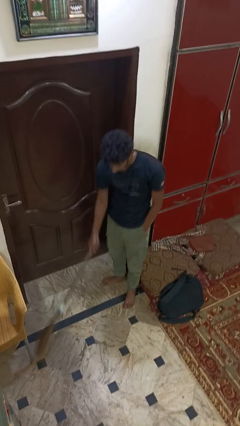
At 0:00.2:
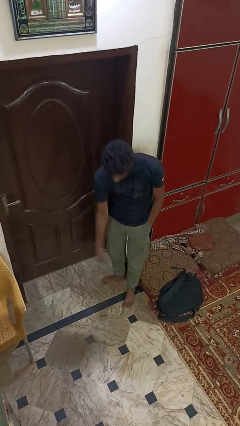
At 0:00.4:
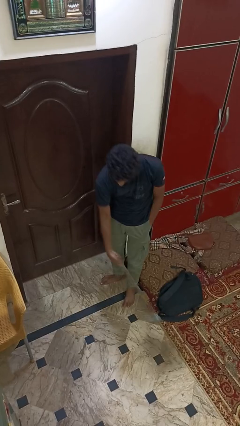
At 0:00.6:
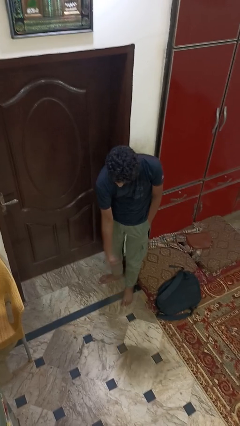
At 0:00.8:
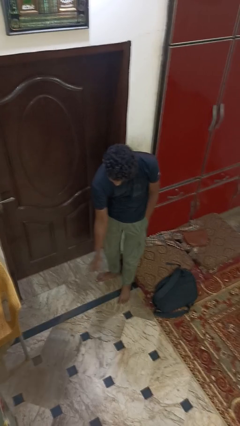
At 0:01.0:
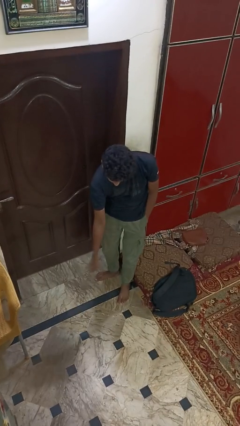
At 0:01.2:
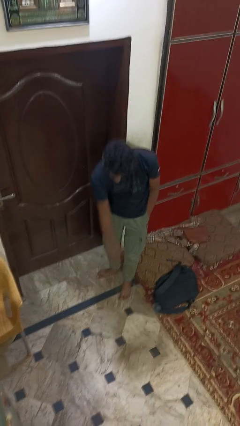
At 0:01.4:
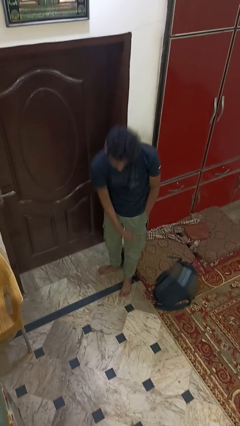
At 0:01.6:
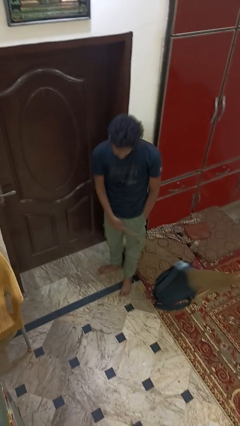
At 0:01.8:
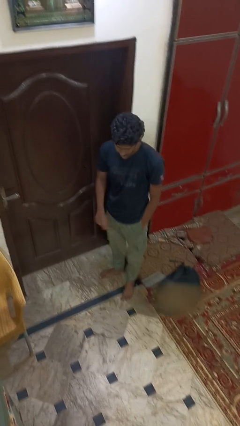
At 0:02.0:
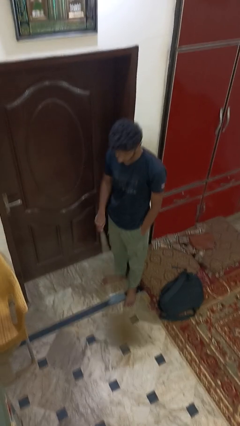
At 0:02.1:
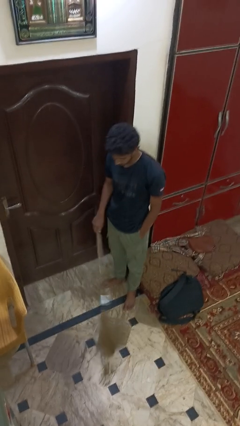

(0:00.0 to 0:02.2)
person sweeps floor

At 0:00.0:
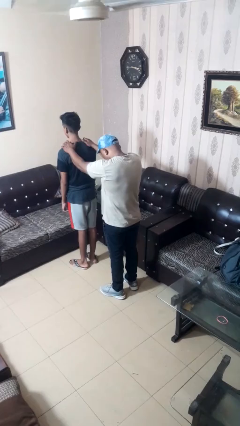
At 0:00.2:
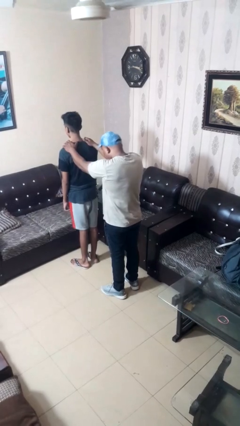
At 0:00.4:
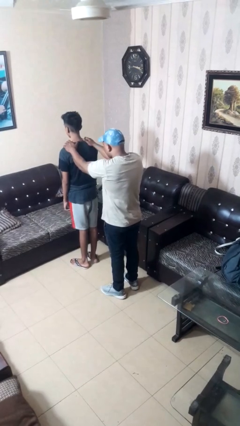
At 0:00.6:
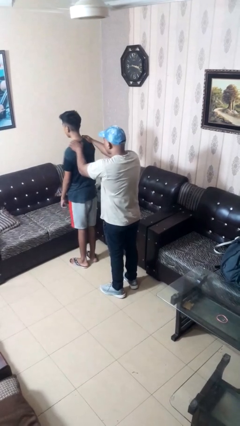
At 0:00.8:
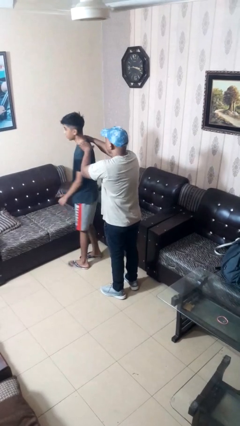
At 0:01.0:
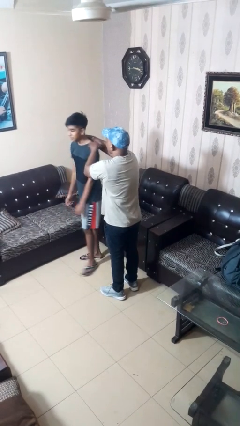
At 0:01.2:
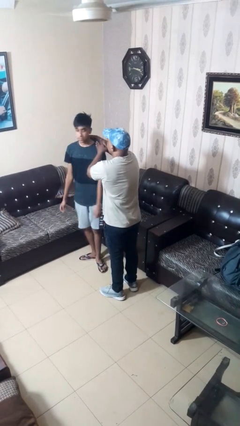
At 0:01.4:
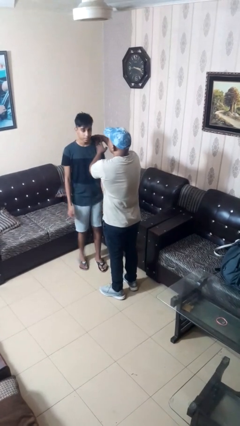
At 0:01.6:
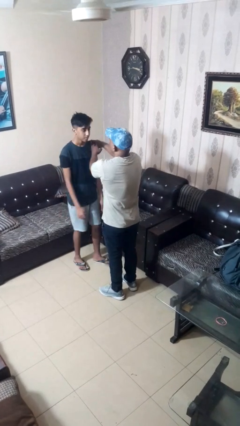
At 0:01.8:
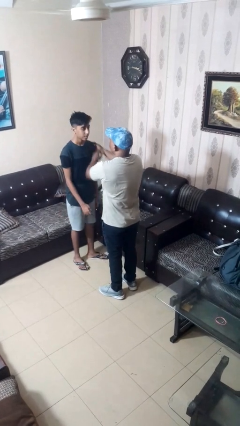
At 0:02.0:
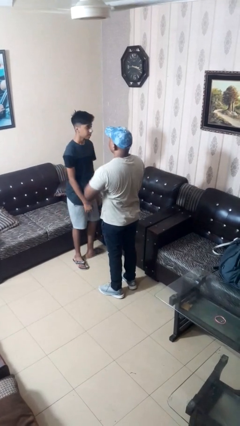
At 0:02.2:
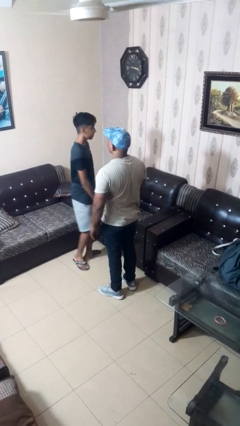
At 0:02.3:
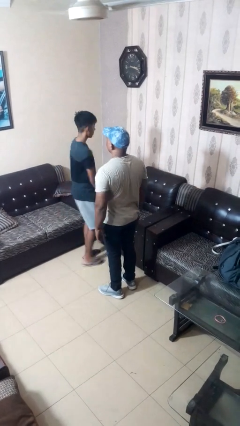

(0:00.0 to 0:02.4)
person spins person around

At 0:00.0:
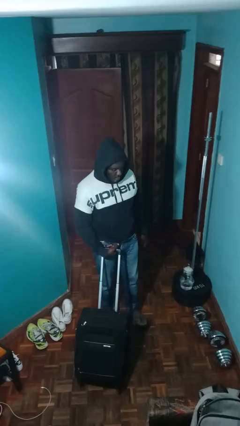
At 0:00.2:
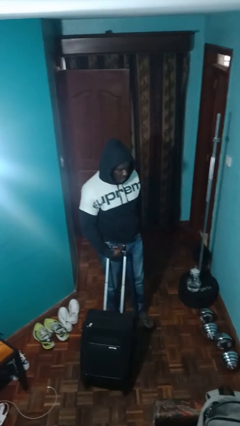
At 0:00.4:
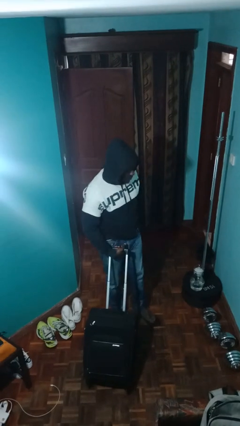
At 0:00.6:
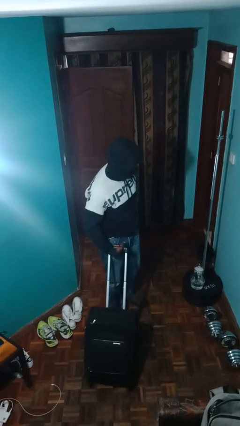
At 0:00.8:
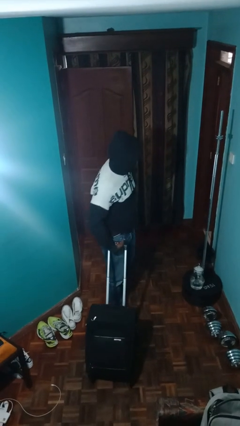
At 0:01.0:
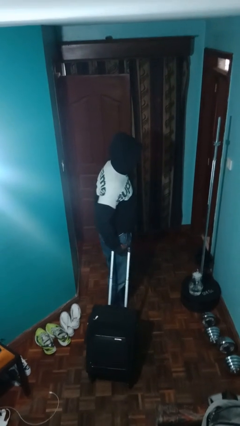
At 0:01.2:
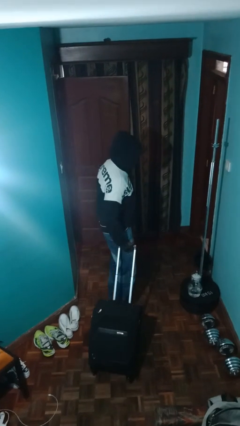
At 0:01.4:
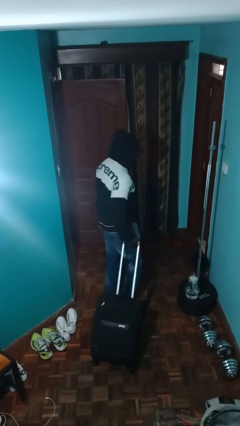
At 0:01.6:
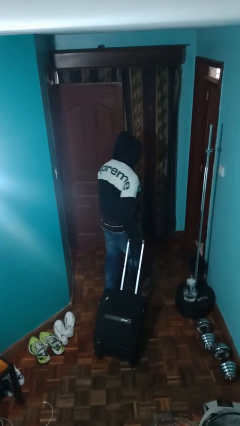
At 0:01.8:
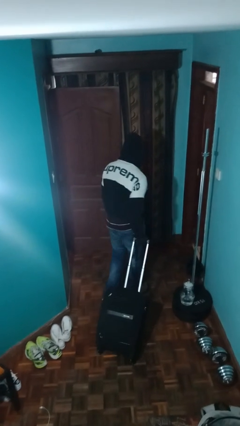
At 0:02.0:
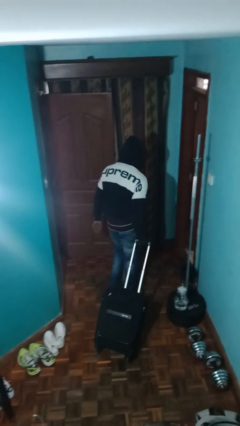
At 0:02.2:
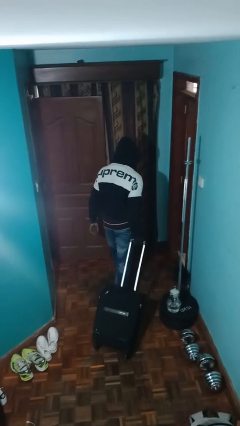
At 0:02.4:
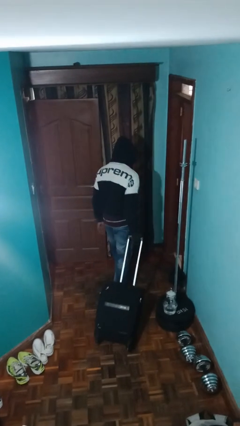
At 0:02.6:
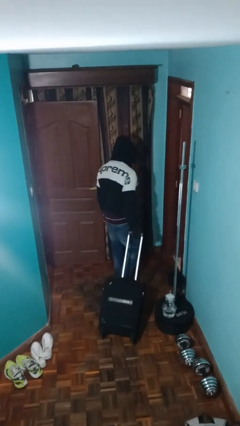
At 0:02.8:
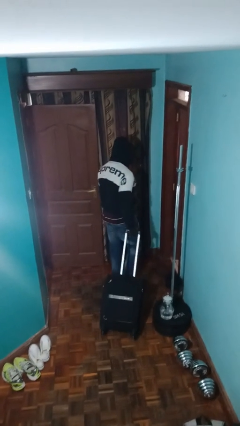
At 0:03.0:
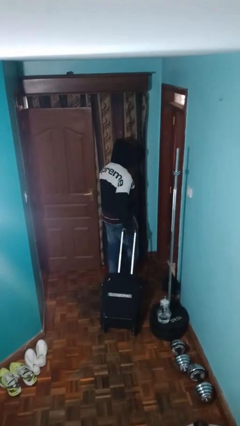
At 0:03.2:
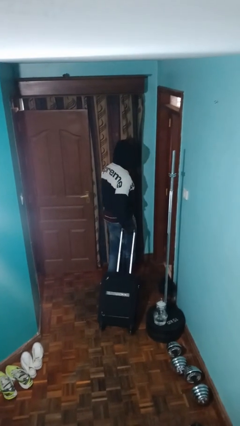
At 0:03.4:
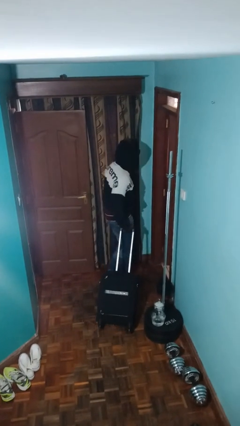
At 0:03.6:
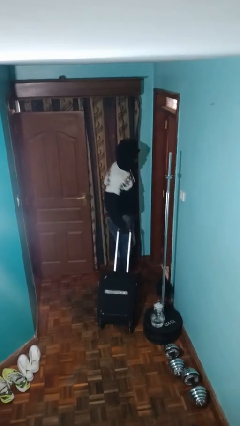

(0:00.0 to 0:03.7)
person pulls wheeled cart

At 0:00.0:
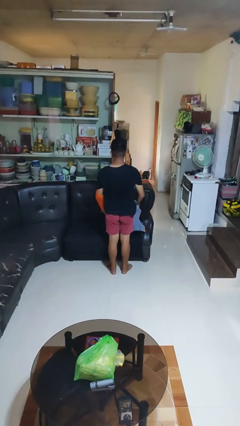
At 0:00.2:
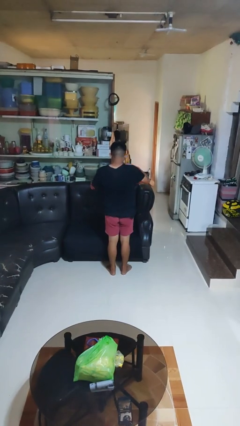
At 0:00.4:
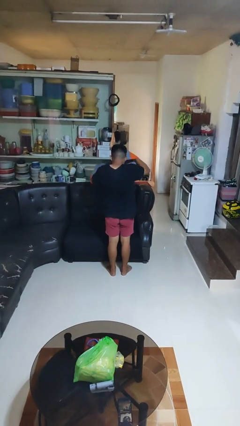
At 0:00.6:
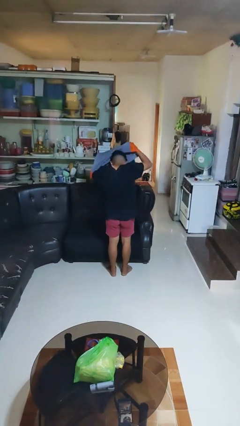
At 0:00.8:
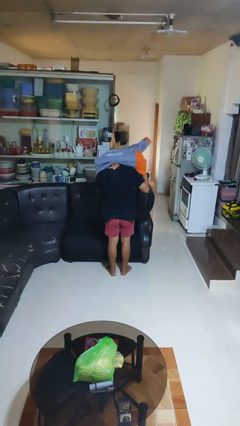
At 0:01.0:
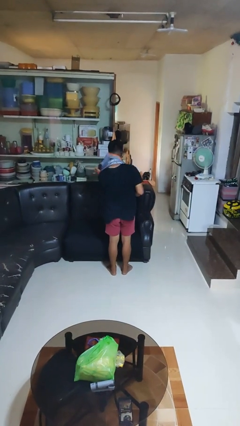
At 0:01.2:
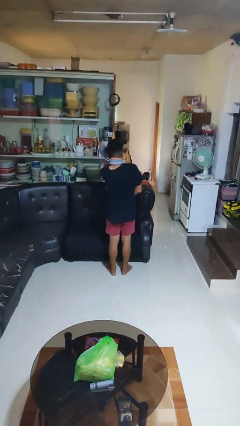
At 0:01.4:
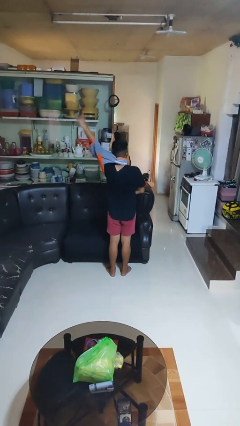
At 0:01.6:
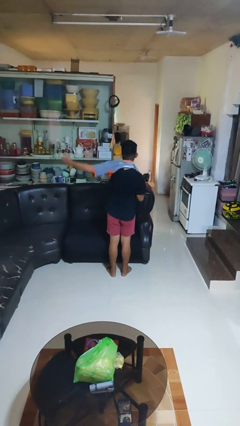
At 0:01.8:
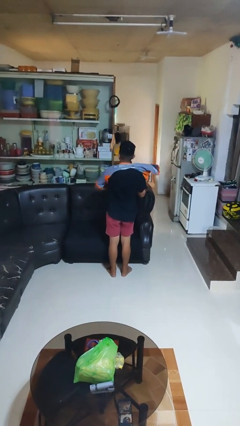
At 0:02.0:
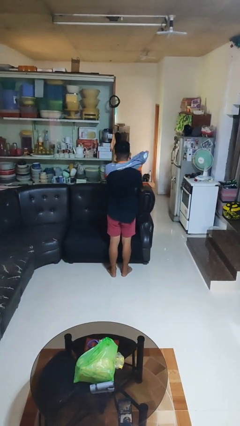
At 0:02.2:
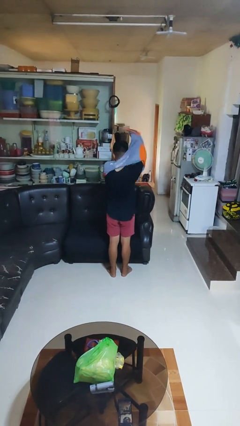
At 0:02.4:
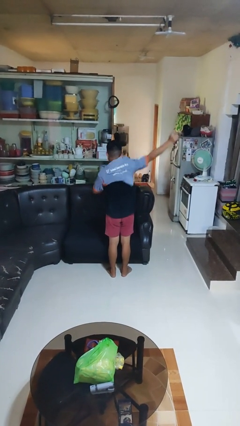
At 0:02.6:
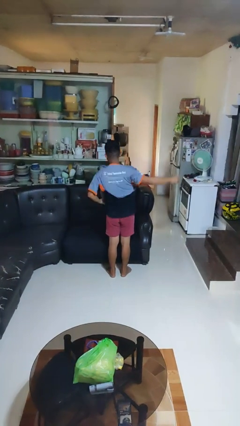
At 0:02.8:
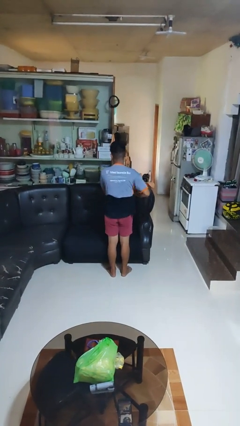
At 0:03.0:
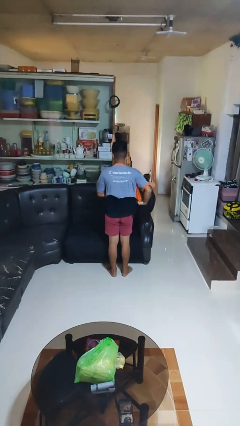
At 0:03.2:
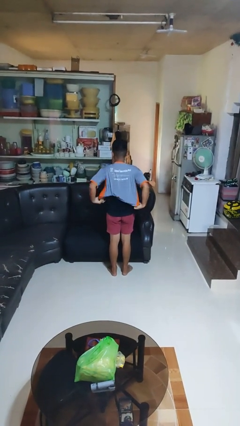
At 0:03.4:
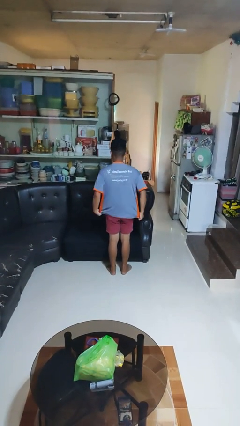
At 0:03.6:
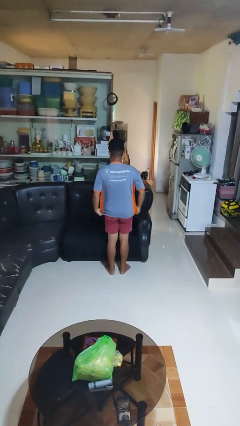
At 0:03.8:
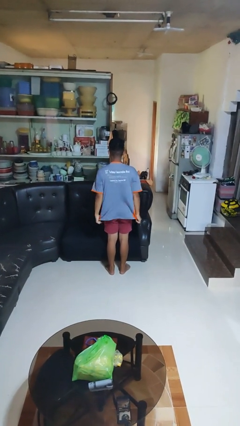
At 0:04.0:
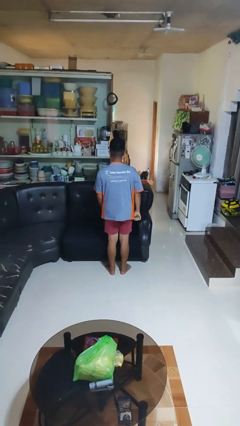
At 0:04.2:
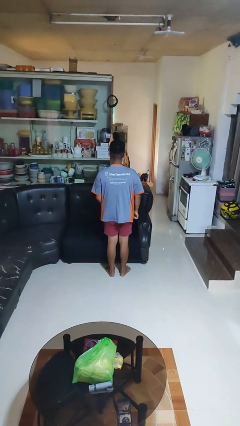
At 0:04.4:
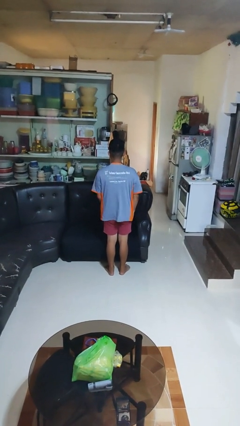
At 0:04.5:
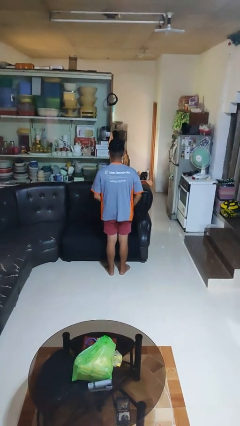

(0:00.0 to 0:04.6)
person puts on shirt

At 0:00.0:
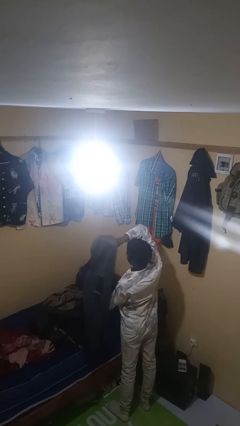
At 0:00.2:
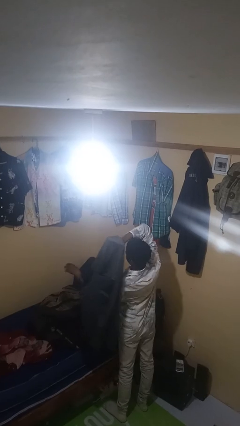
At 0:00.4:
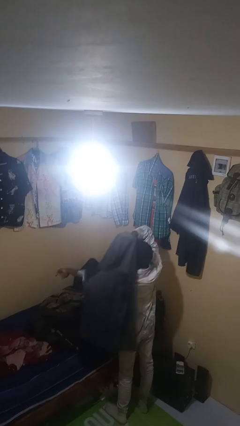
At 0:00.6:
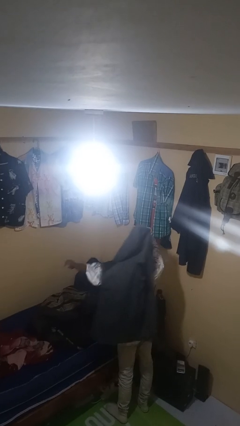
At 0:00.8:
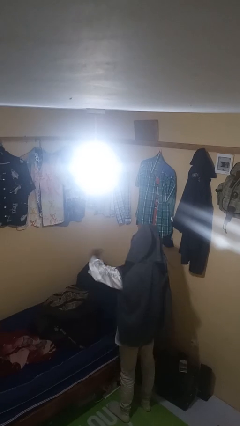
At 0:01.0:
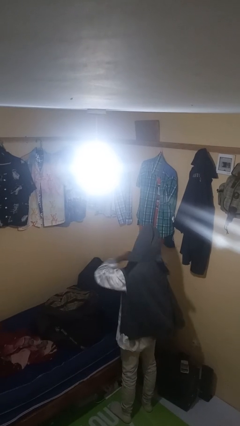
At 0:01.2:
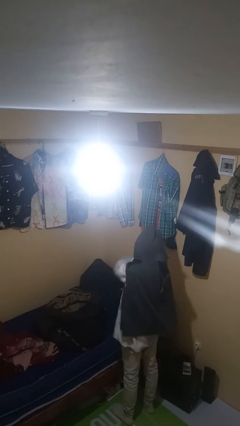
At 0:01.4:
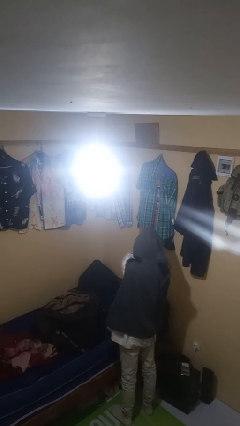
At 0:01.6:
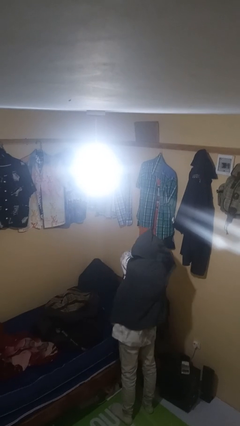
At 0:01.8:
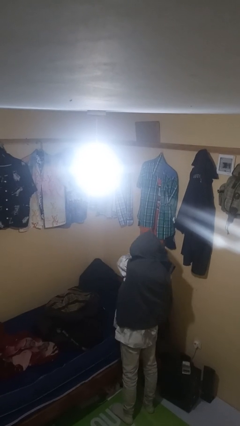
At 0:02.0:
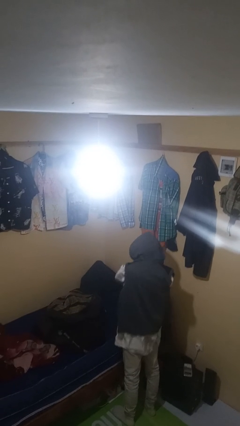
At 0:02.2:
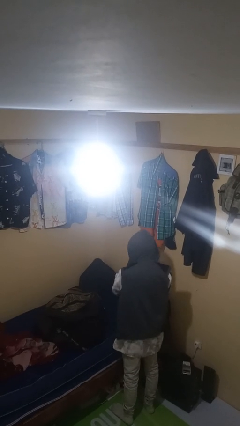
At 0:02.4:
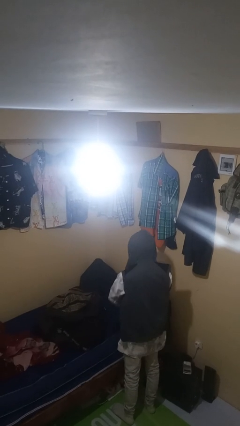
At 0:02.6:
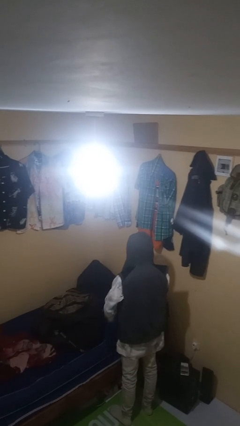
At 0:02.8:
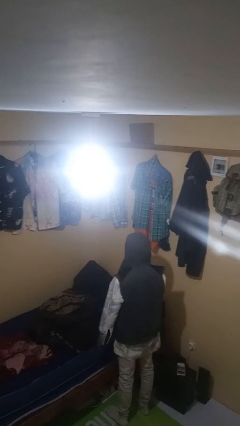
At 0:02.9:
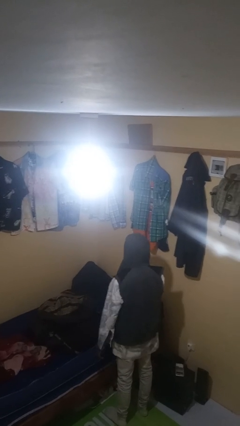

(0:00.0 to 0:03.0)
person puts on hoodie

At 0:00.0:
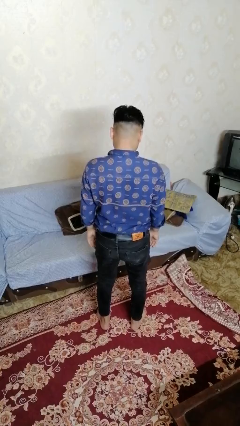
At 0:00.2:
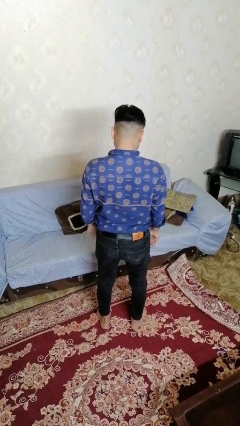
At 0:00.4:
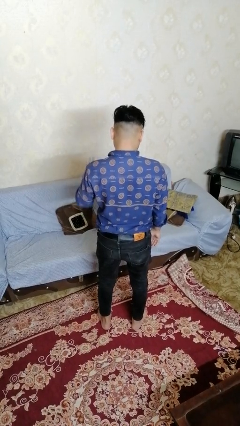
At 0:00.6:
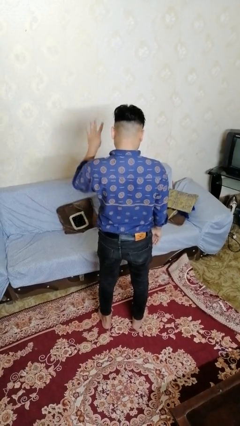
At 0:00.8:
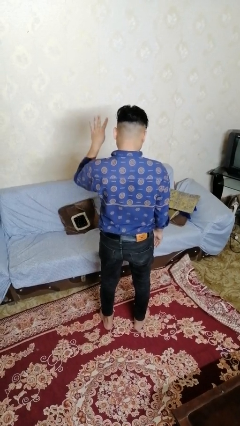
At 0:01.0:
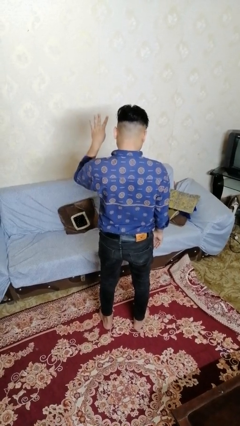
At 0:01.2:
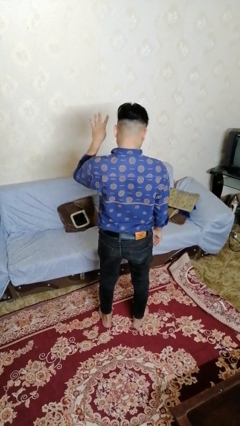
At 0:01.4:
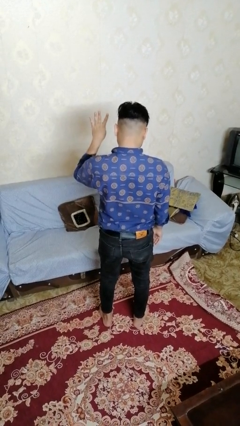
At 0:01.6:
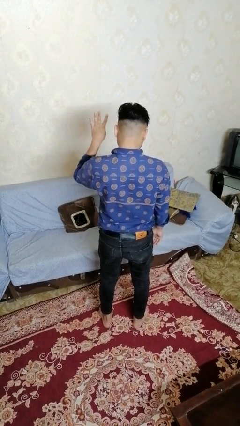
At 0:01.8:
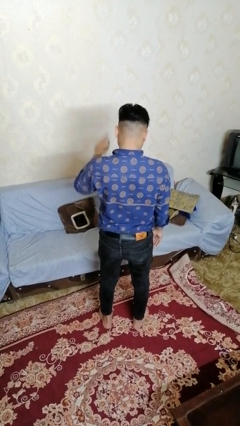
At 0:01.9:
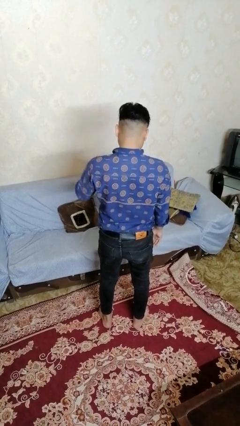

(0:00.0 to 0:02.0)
person gestures number four
